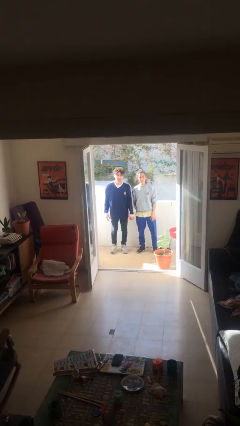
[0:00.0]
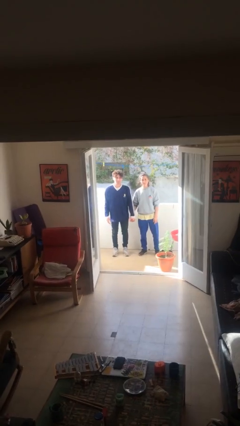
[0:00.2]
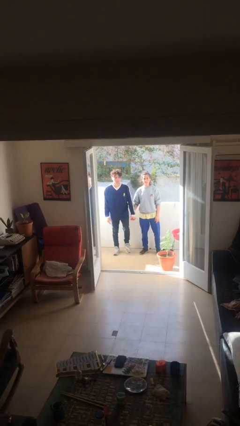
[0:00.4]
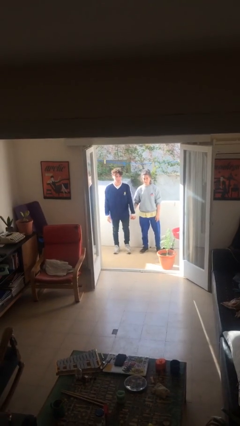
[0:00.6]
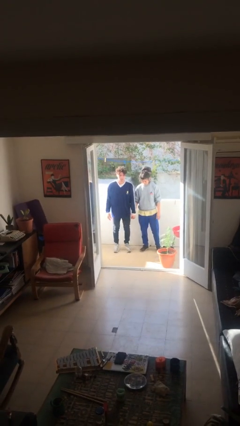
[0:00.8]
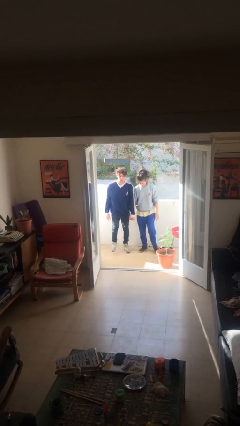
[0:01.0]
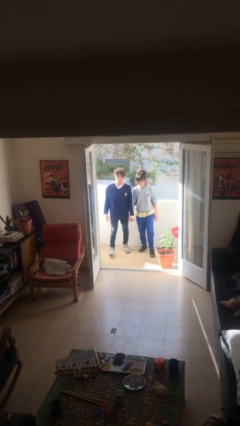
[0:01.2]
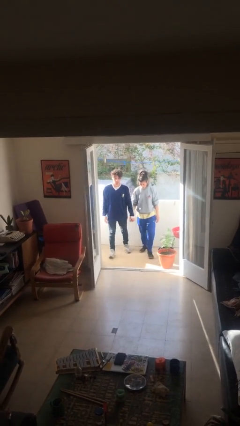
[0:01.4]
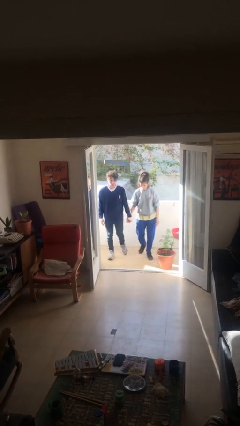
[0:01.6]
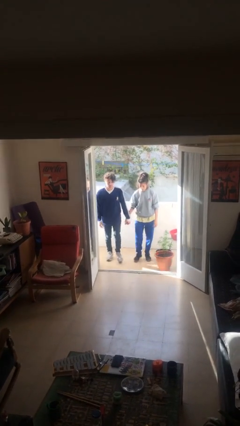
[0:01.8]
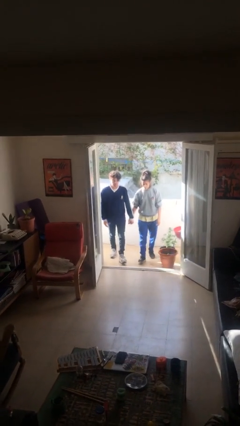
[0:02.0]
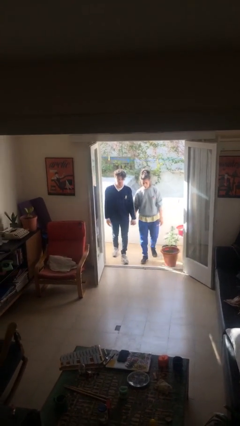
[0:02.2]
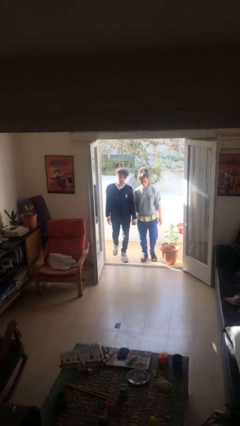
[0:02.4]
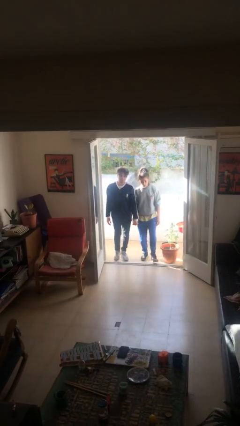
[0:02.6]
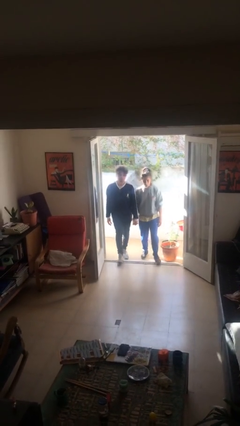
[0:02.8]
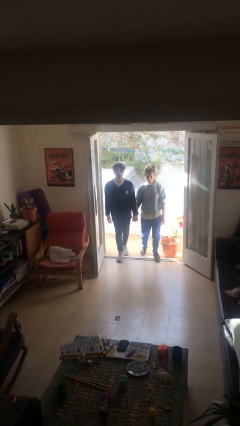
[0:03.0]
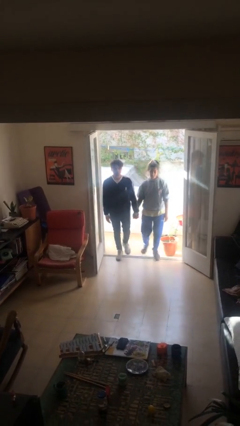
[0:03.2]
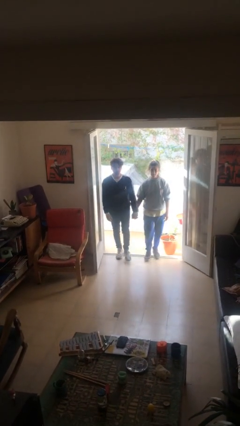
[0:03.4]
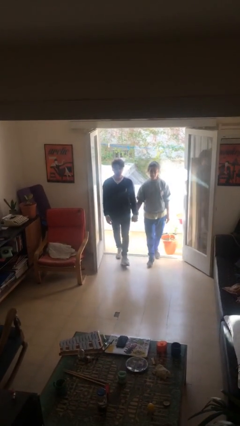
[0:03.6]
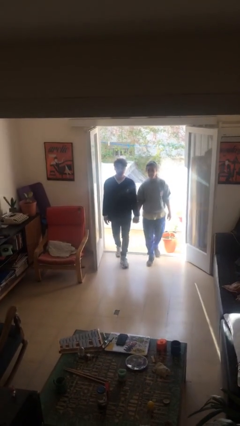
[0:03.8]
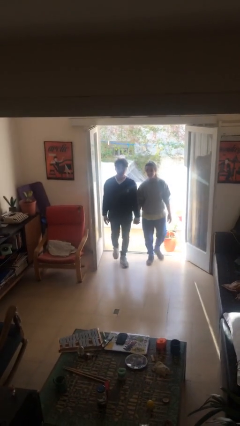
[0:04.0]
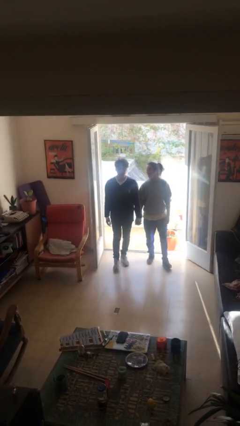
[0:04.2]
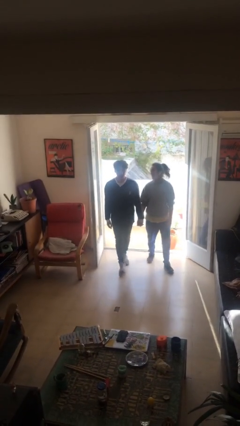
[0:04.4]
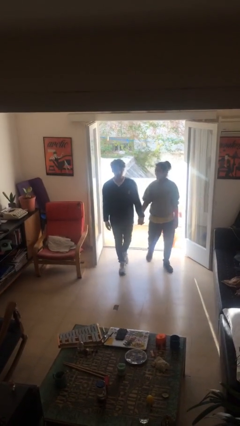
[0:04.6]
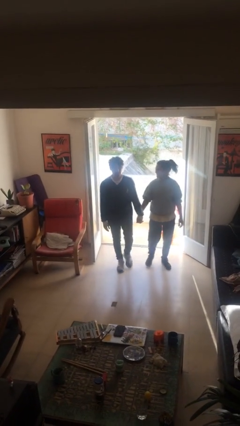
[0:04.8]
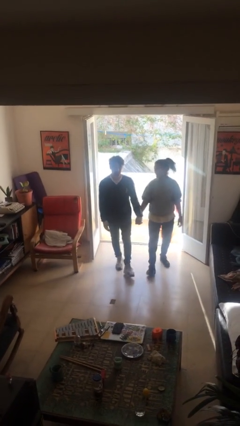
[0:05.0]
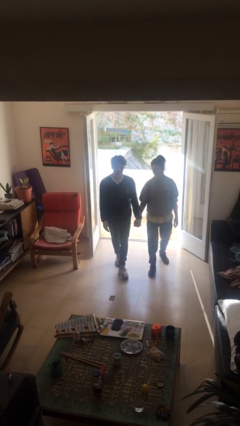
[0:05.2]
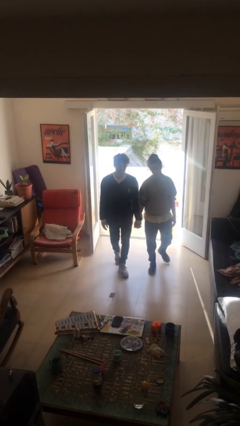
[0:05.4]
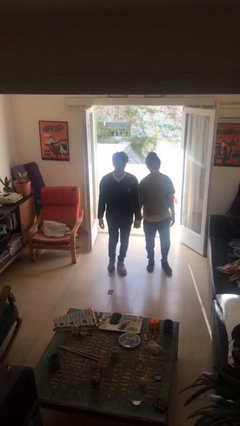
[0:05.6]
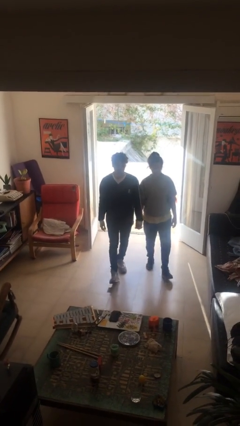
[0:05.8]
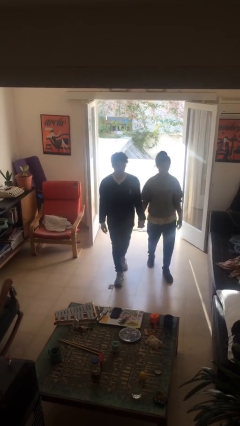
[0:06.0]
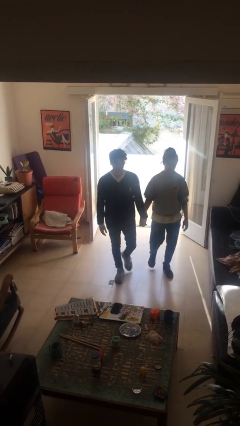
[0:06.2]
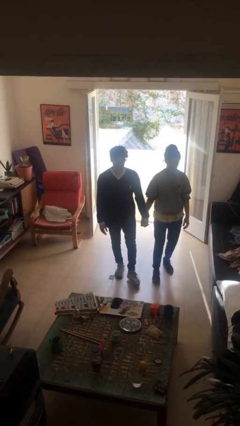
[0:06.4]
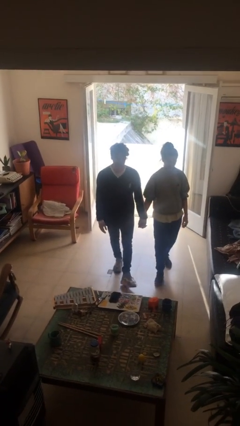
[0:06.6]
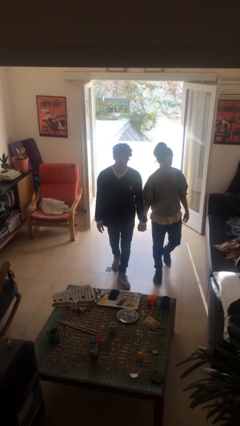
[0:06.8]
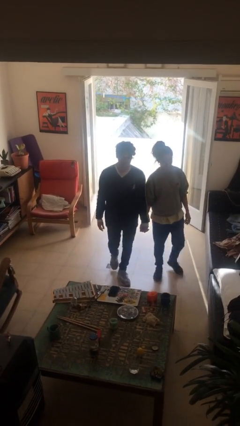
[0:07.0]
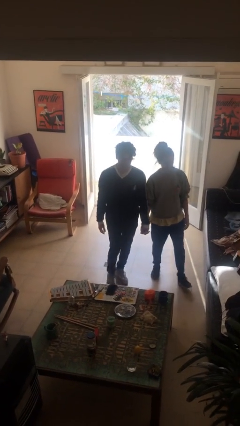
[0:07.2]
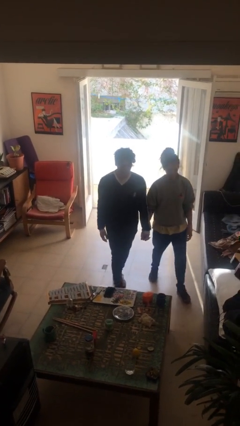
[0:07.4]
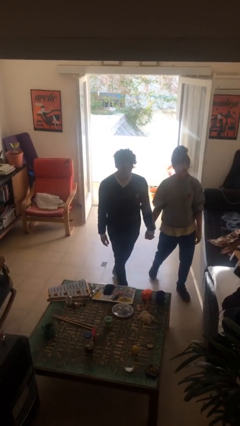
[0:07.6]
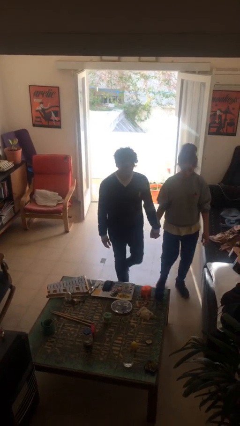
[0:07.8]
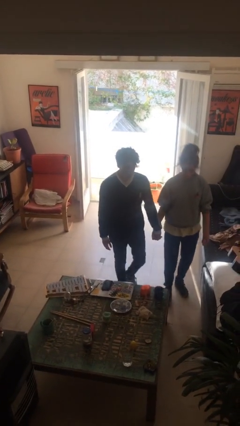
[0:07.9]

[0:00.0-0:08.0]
person holds hand

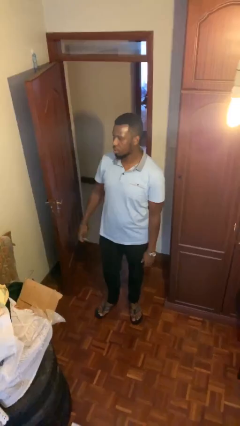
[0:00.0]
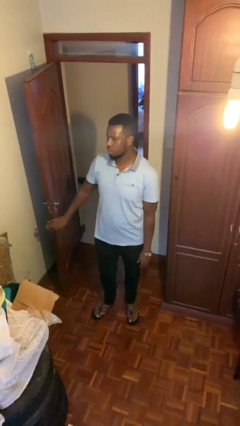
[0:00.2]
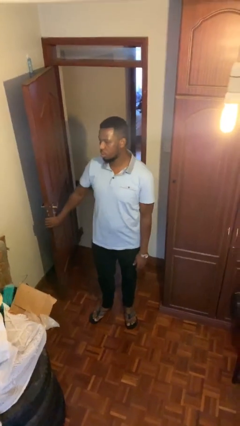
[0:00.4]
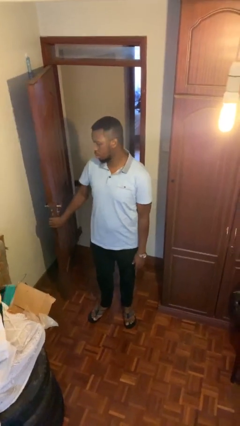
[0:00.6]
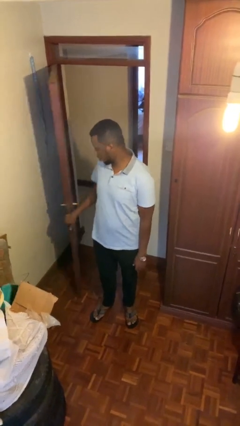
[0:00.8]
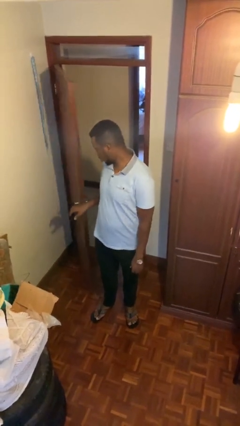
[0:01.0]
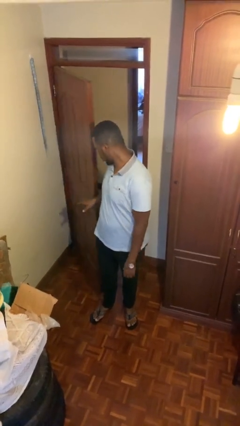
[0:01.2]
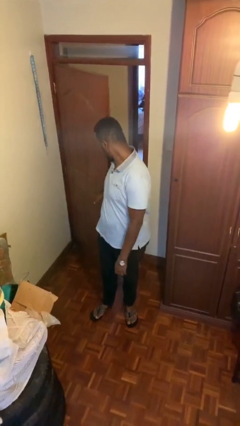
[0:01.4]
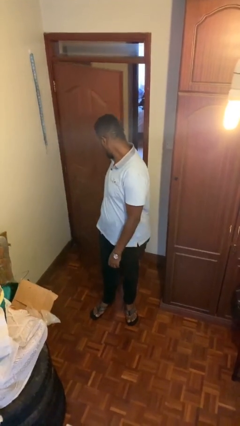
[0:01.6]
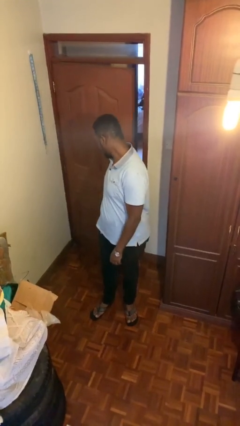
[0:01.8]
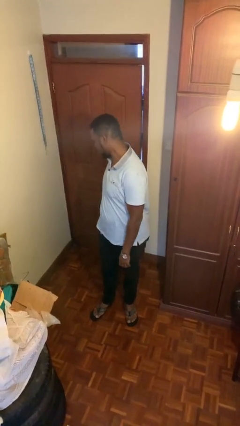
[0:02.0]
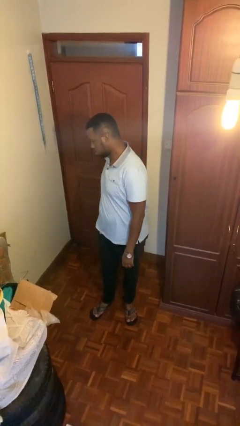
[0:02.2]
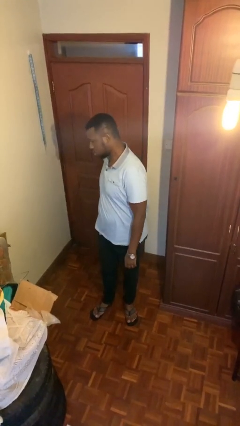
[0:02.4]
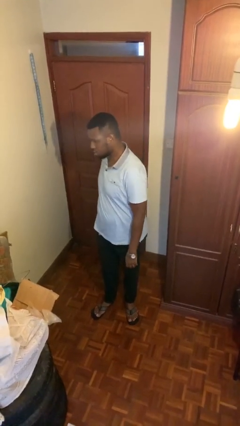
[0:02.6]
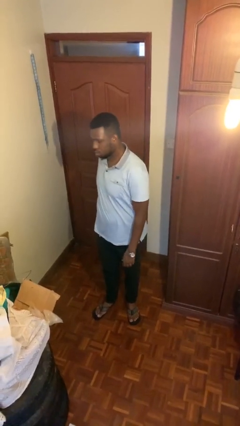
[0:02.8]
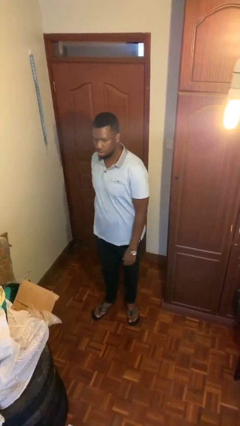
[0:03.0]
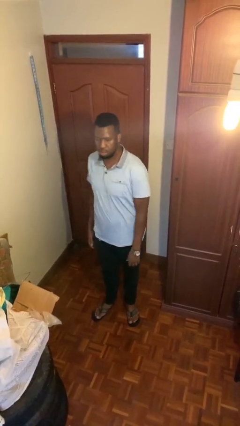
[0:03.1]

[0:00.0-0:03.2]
person closes facility door

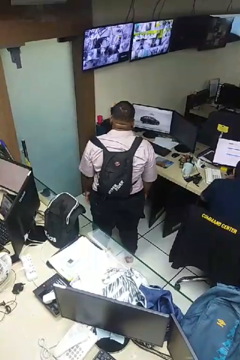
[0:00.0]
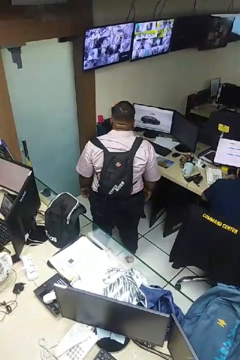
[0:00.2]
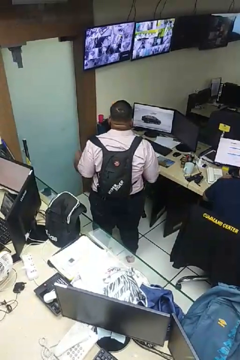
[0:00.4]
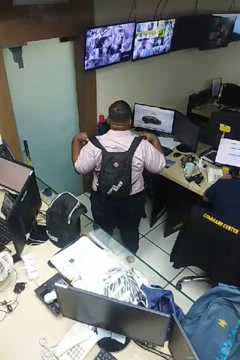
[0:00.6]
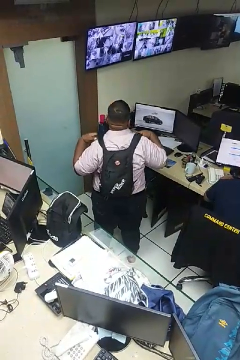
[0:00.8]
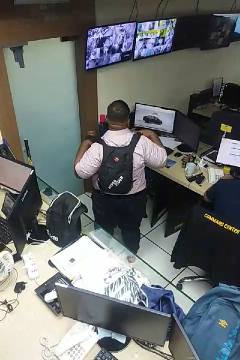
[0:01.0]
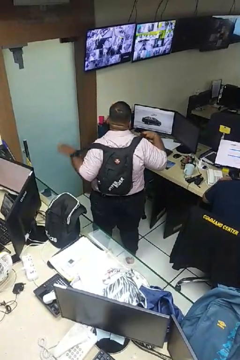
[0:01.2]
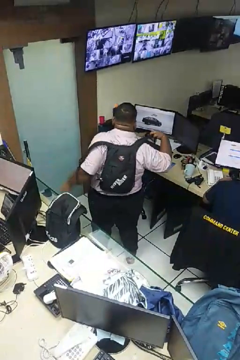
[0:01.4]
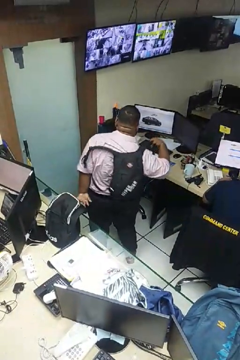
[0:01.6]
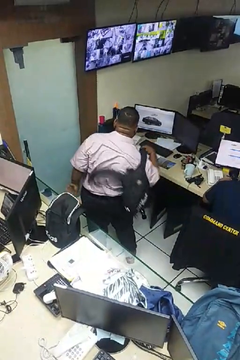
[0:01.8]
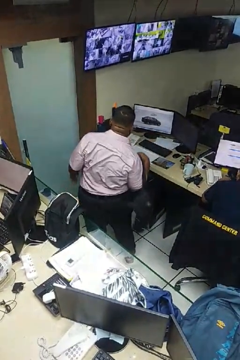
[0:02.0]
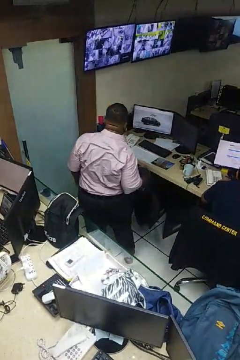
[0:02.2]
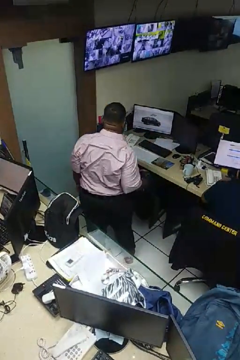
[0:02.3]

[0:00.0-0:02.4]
person takes off backpack

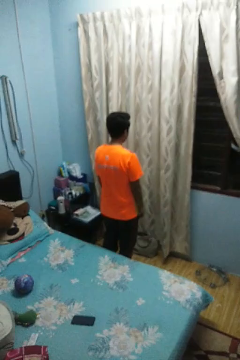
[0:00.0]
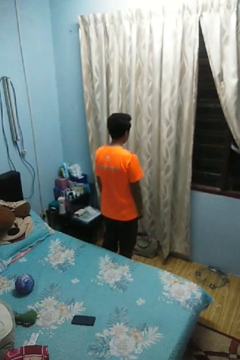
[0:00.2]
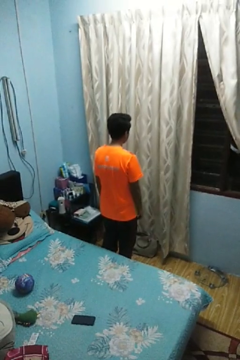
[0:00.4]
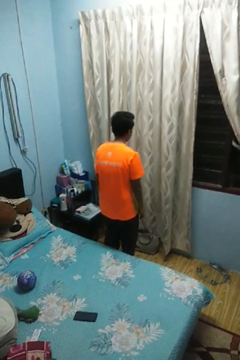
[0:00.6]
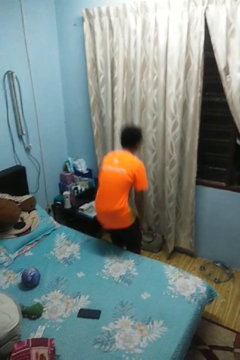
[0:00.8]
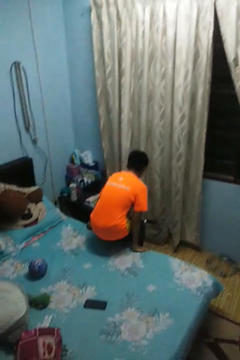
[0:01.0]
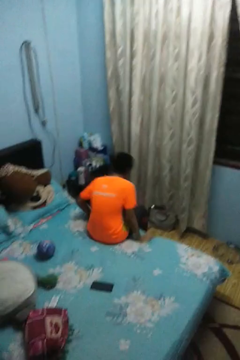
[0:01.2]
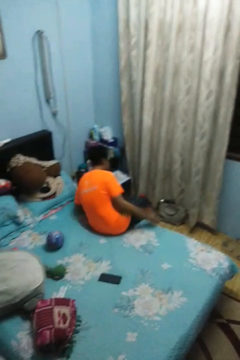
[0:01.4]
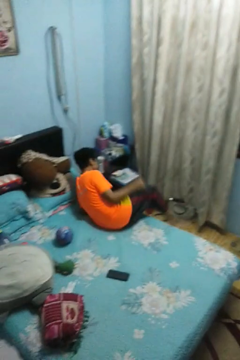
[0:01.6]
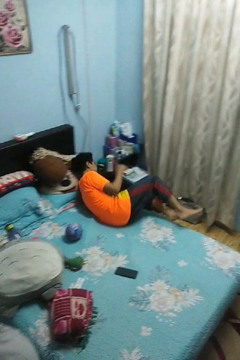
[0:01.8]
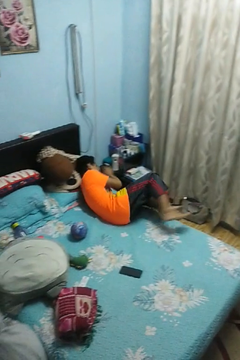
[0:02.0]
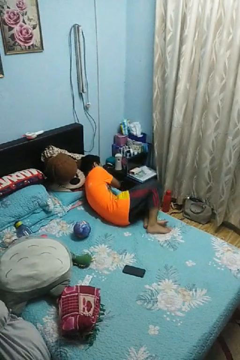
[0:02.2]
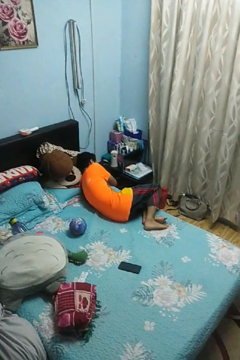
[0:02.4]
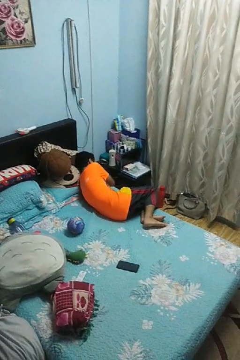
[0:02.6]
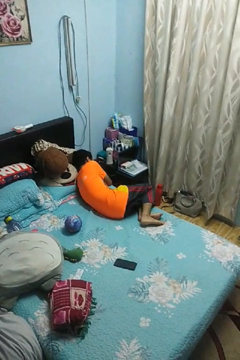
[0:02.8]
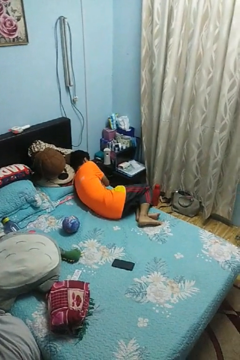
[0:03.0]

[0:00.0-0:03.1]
person lies down on bed

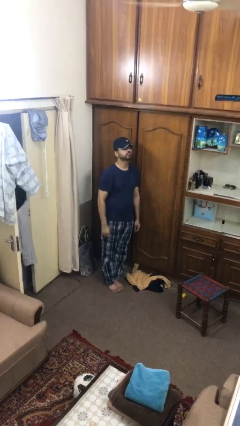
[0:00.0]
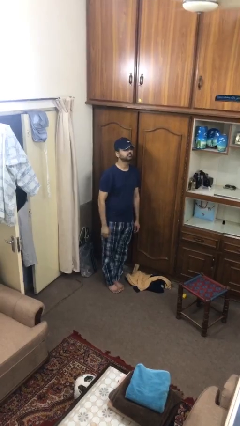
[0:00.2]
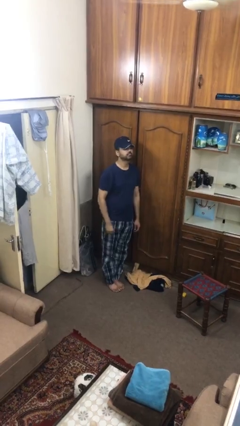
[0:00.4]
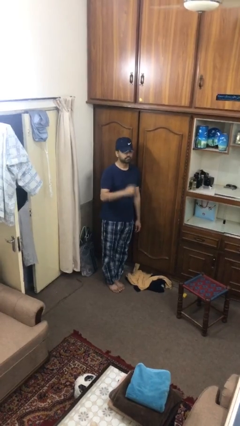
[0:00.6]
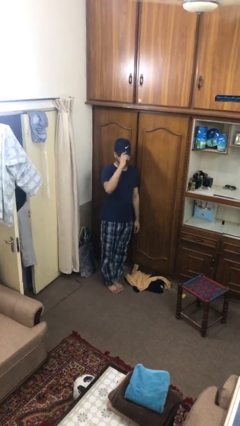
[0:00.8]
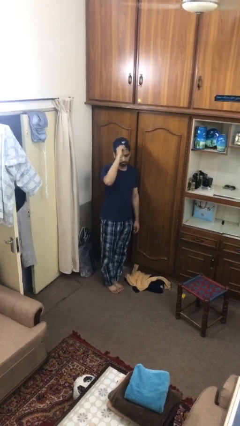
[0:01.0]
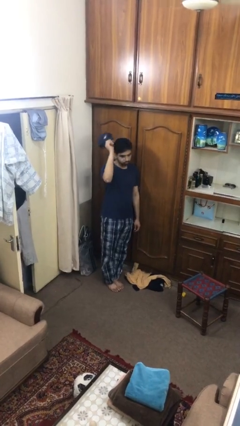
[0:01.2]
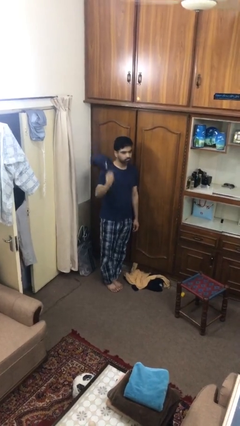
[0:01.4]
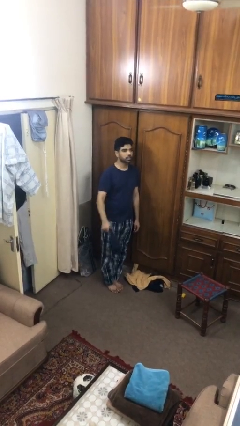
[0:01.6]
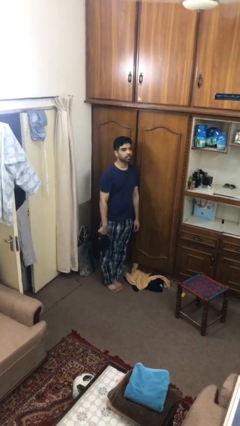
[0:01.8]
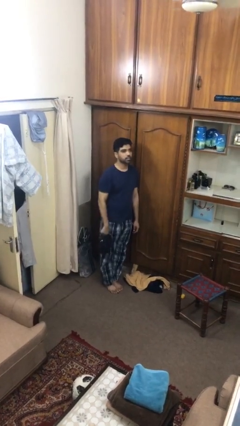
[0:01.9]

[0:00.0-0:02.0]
person takes off hat
